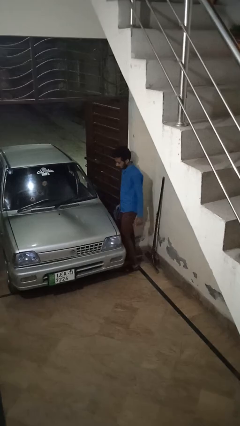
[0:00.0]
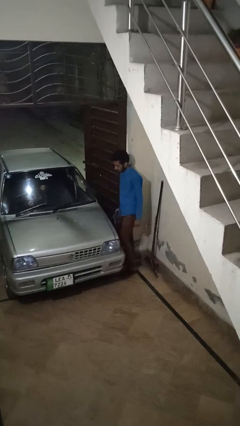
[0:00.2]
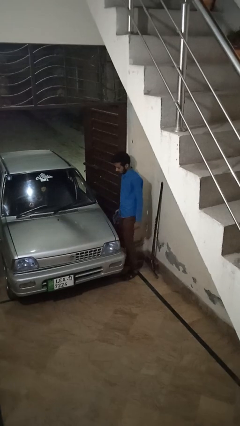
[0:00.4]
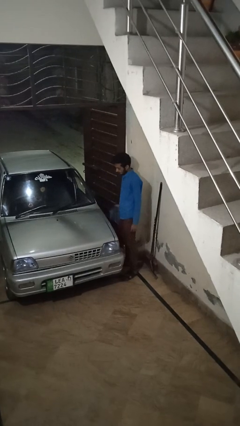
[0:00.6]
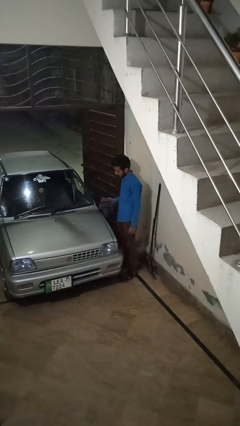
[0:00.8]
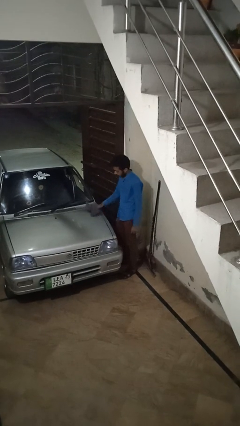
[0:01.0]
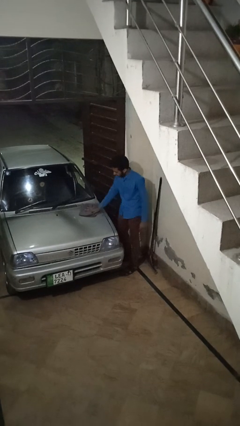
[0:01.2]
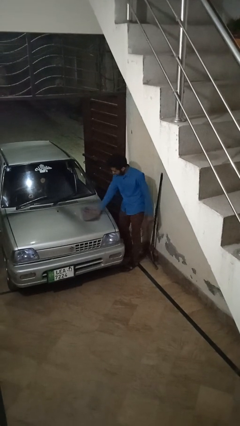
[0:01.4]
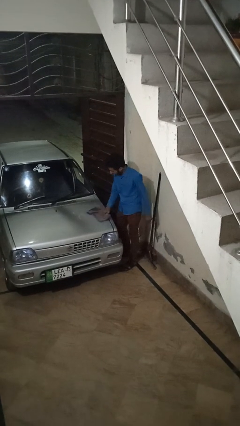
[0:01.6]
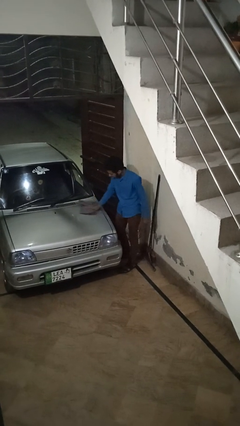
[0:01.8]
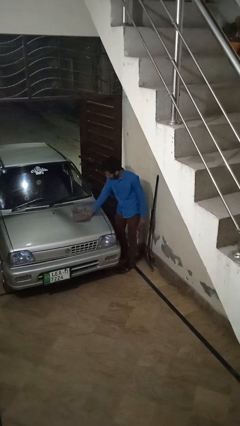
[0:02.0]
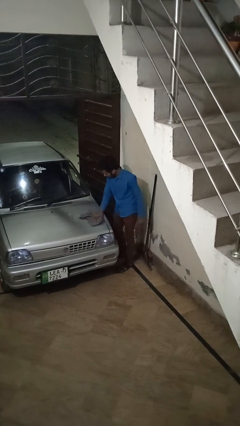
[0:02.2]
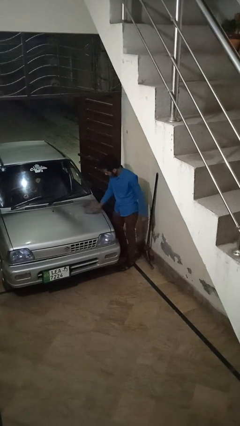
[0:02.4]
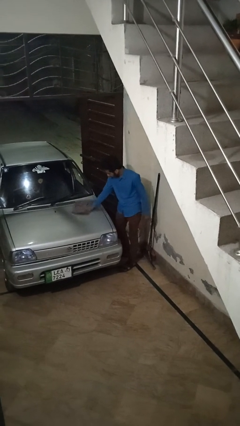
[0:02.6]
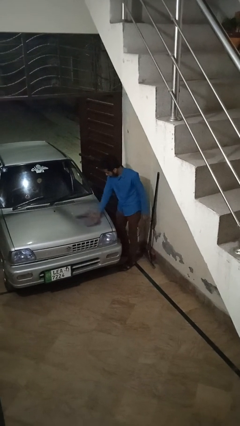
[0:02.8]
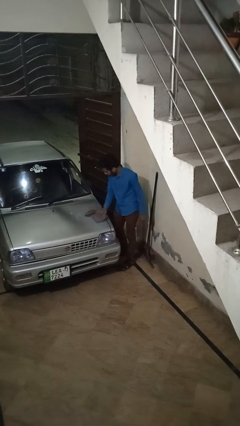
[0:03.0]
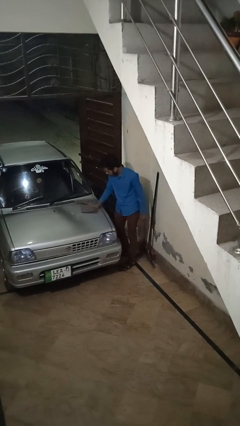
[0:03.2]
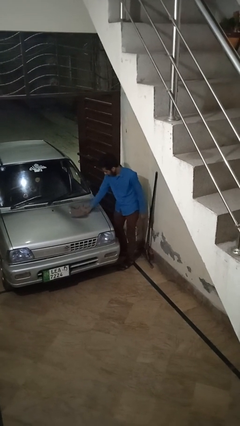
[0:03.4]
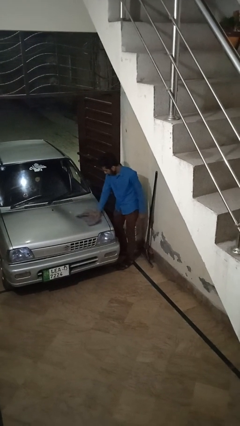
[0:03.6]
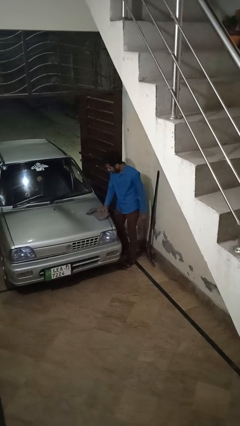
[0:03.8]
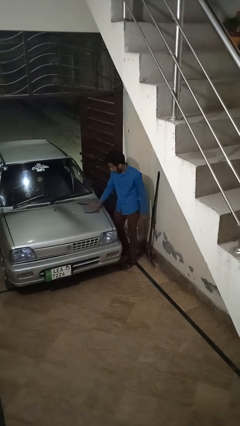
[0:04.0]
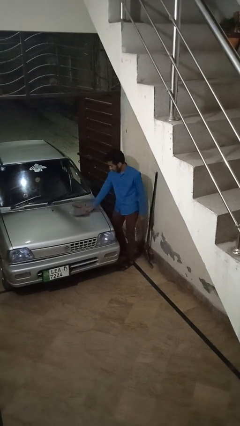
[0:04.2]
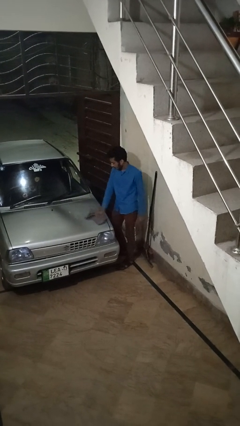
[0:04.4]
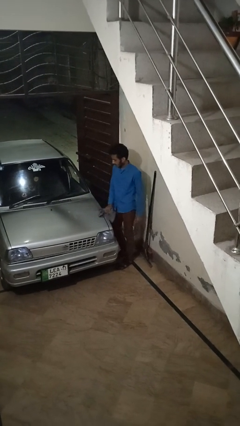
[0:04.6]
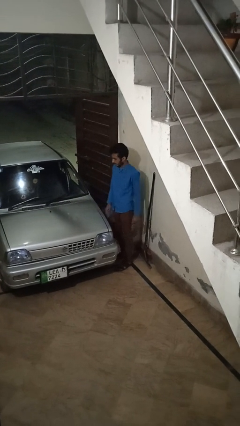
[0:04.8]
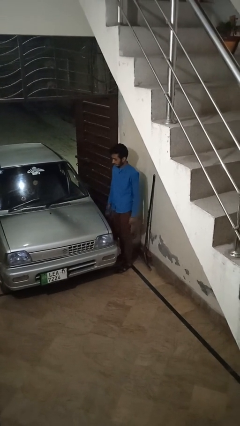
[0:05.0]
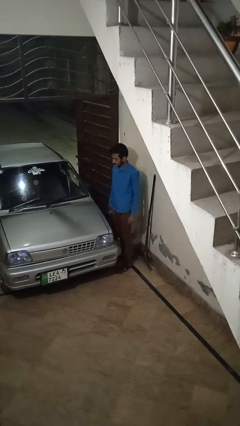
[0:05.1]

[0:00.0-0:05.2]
person polishes car with rag

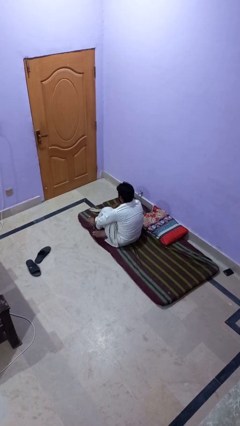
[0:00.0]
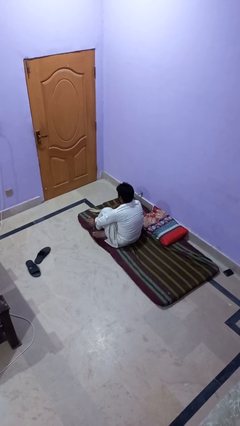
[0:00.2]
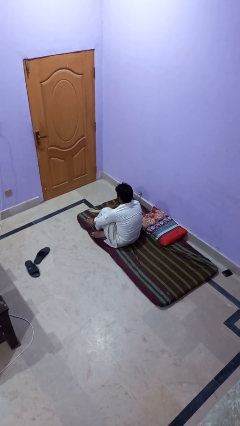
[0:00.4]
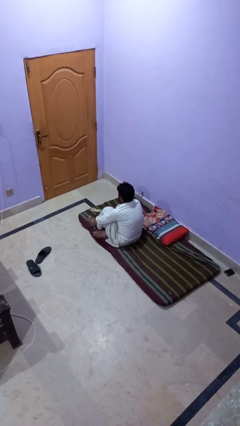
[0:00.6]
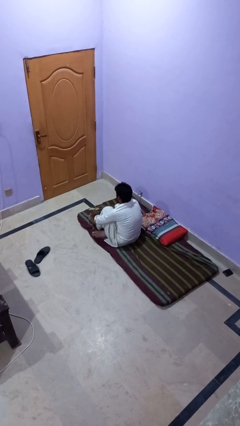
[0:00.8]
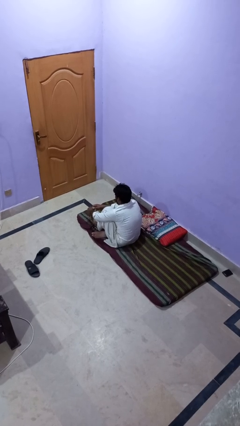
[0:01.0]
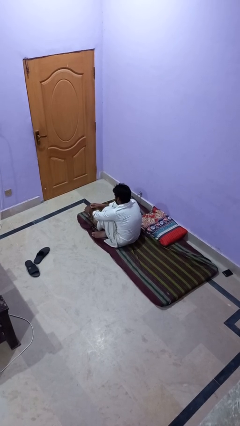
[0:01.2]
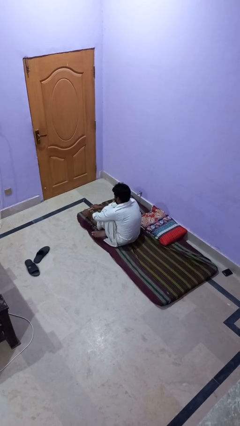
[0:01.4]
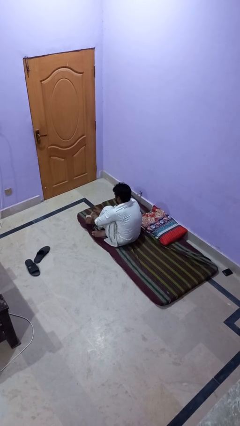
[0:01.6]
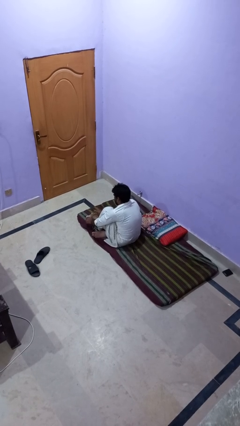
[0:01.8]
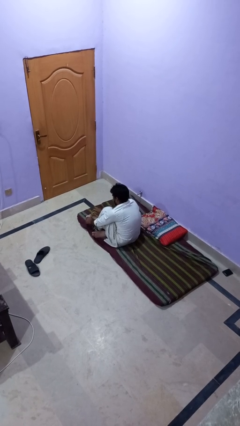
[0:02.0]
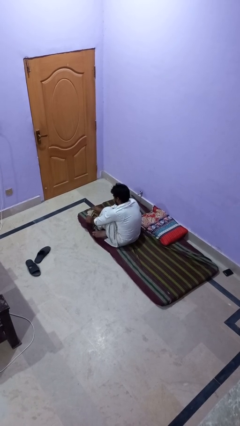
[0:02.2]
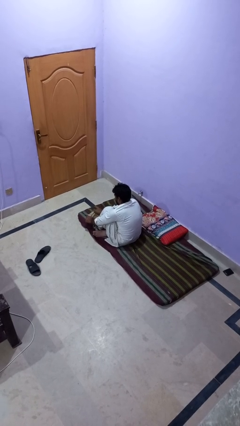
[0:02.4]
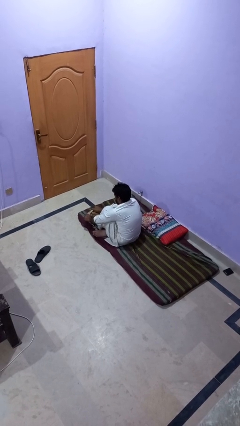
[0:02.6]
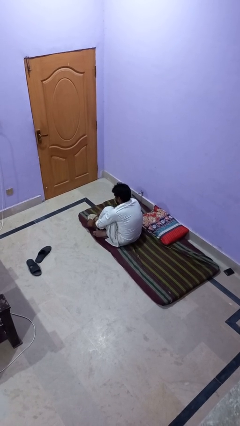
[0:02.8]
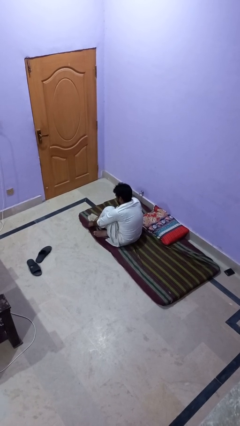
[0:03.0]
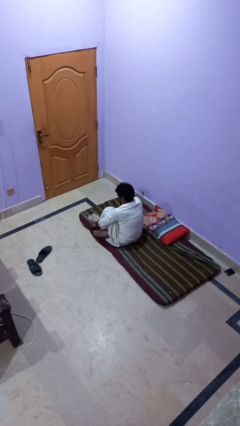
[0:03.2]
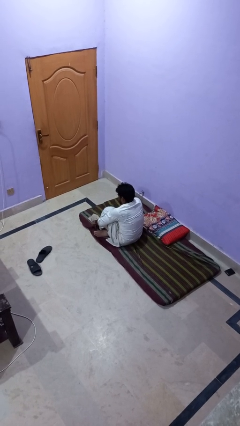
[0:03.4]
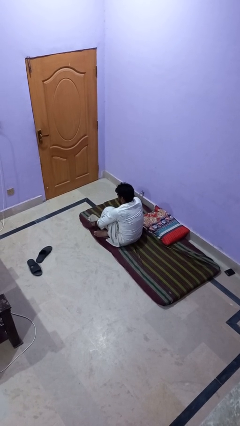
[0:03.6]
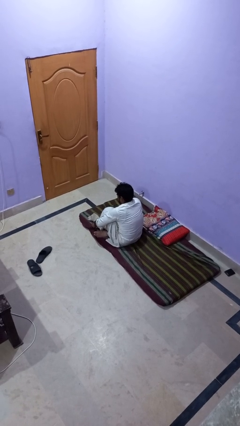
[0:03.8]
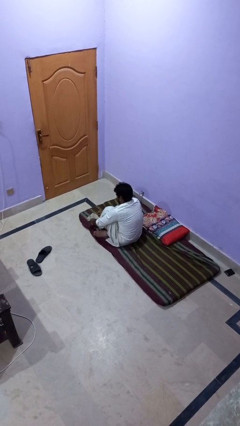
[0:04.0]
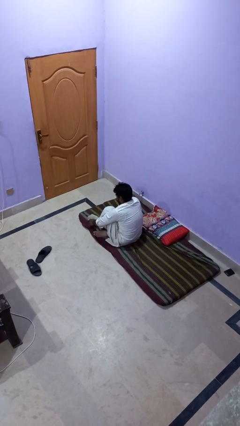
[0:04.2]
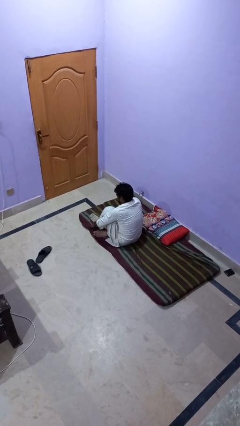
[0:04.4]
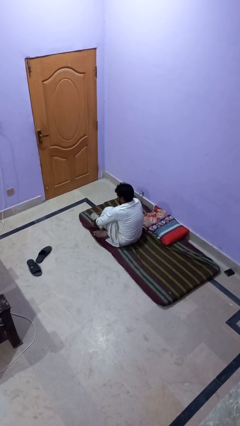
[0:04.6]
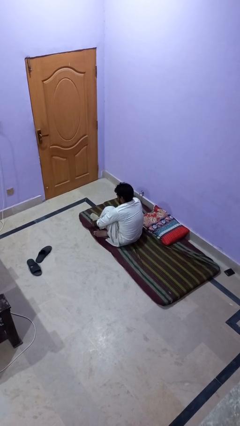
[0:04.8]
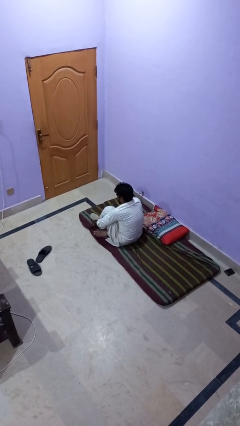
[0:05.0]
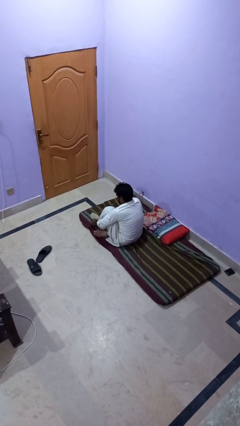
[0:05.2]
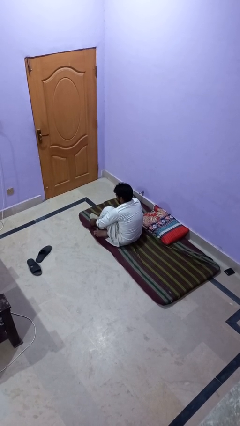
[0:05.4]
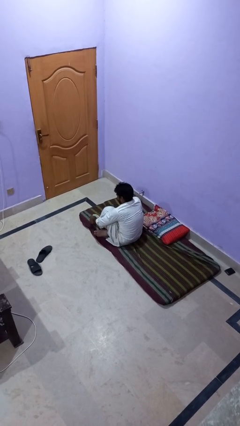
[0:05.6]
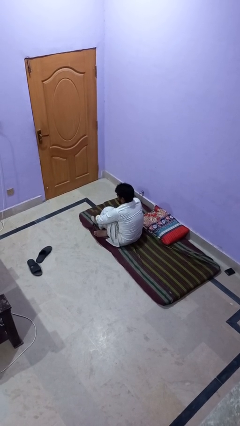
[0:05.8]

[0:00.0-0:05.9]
person puts on socks

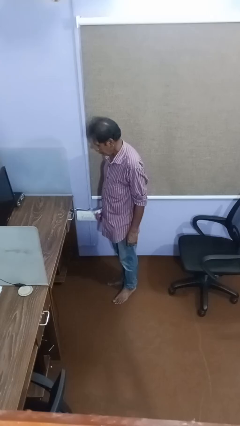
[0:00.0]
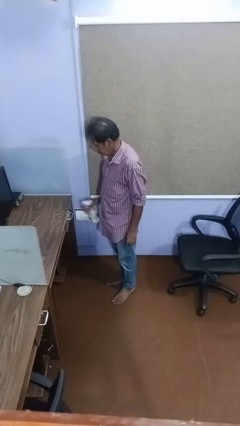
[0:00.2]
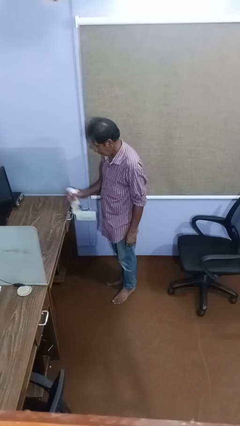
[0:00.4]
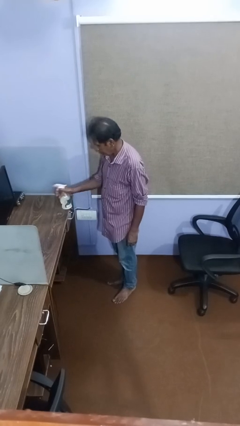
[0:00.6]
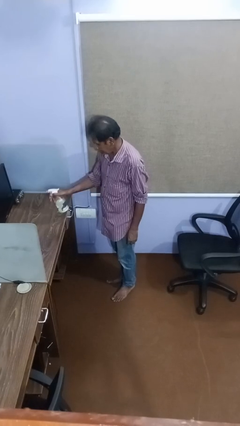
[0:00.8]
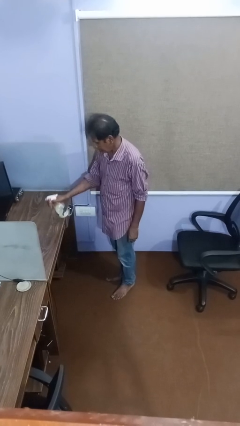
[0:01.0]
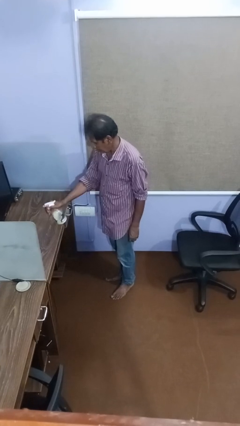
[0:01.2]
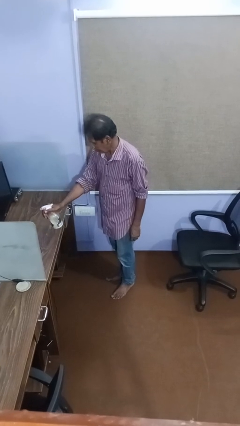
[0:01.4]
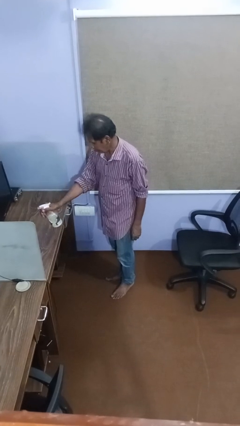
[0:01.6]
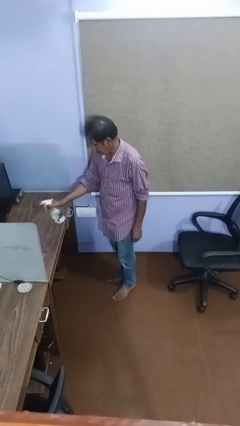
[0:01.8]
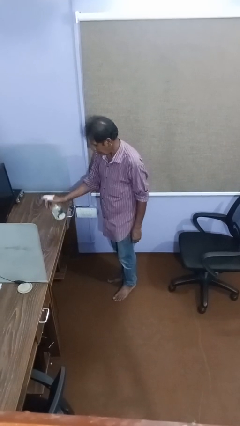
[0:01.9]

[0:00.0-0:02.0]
person sprays from bottle

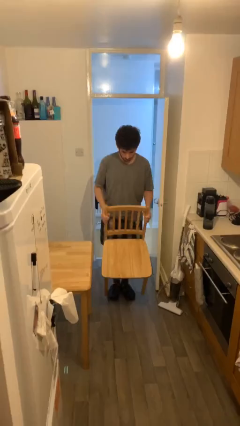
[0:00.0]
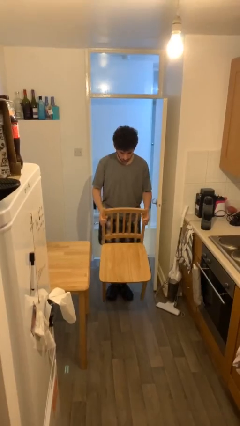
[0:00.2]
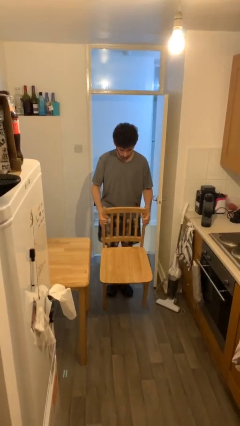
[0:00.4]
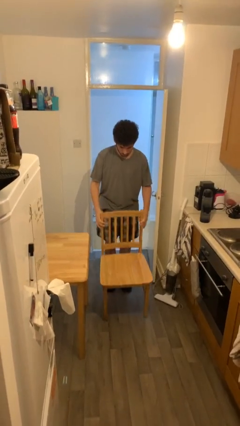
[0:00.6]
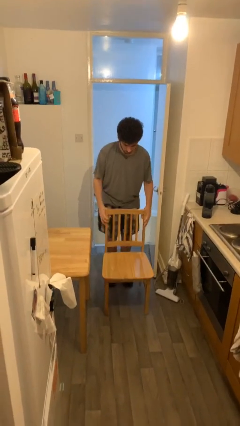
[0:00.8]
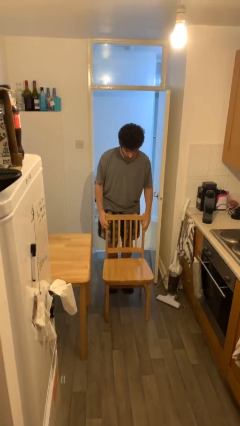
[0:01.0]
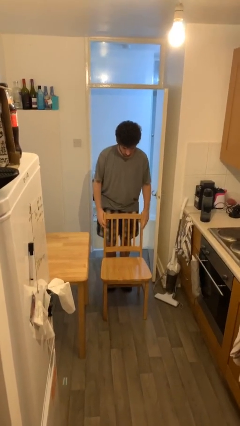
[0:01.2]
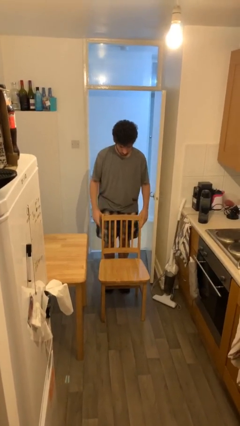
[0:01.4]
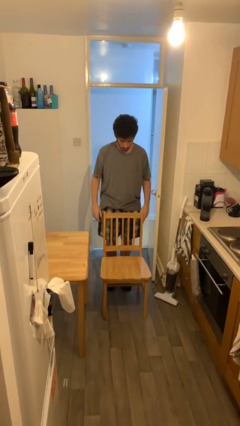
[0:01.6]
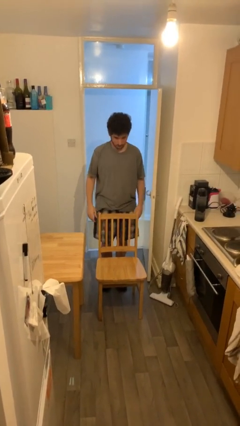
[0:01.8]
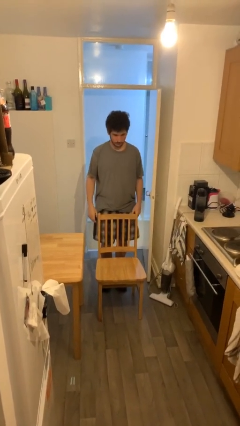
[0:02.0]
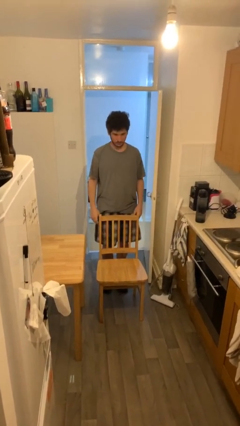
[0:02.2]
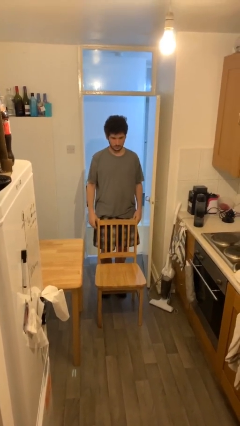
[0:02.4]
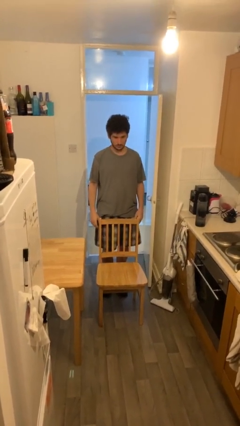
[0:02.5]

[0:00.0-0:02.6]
person puts down object on floor

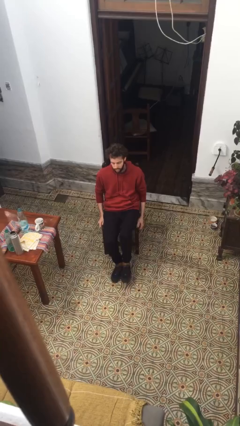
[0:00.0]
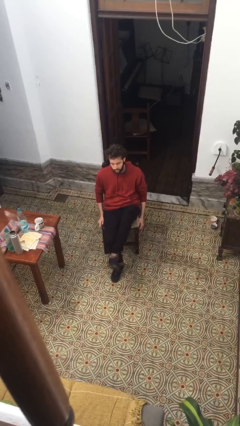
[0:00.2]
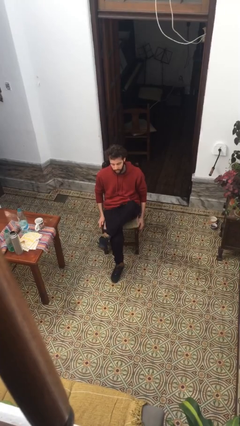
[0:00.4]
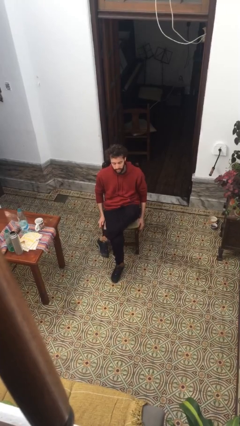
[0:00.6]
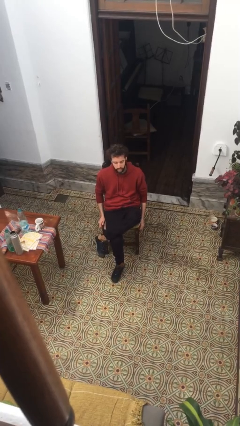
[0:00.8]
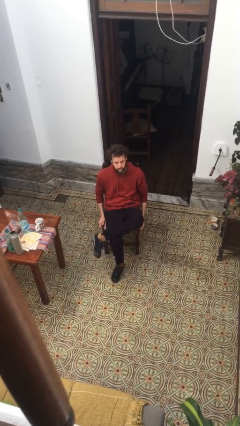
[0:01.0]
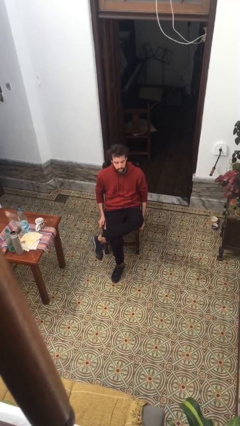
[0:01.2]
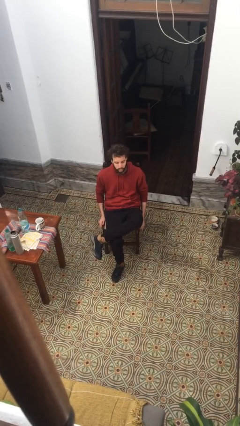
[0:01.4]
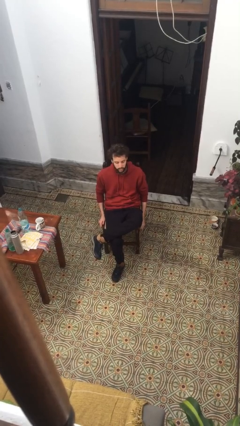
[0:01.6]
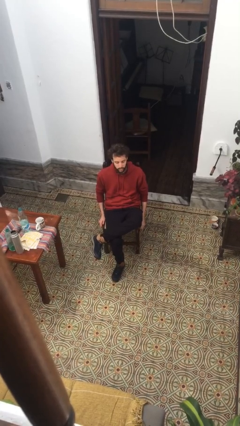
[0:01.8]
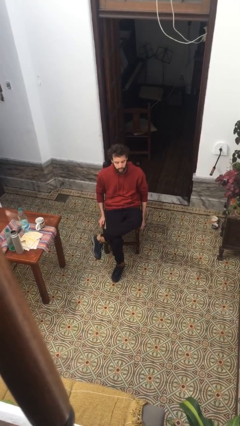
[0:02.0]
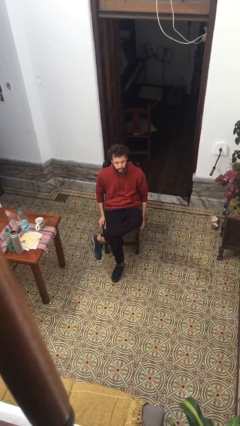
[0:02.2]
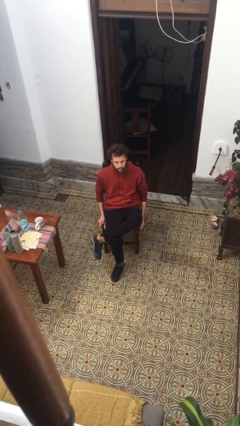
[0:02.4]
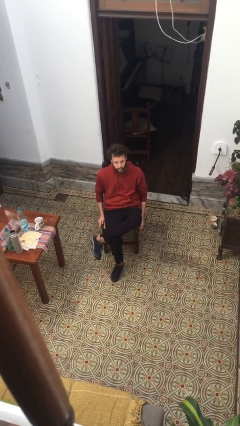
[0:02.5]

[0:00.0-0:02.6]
person crosses legs
